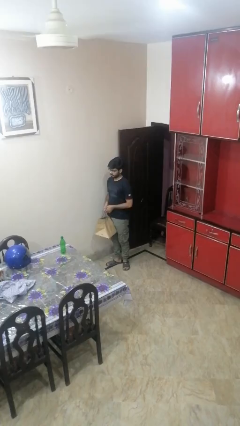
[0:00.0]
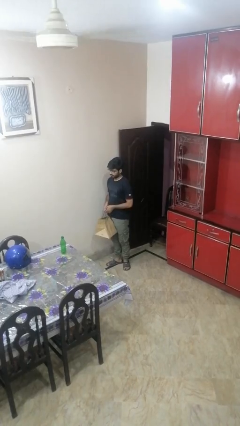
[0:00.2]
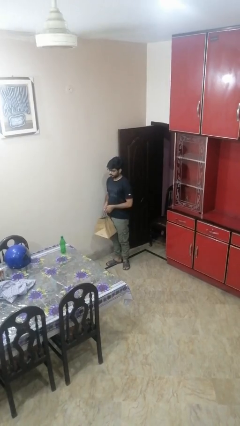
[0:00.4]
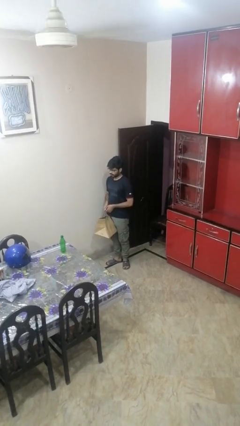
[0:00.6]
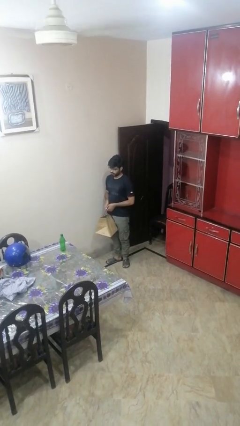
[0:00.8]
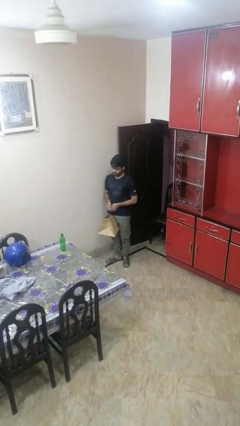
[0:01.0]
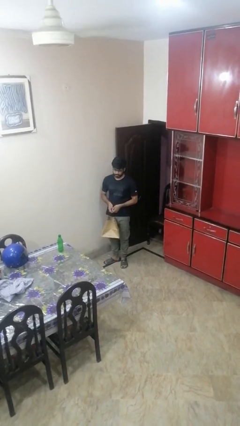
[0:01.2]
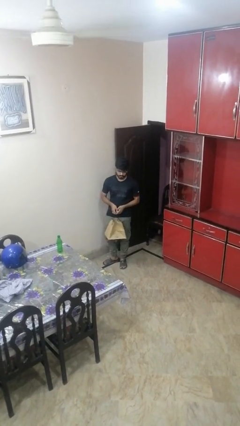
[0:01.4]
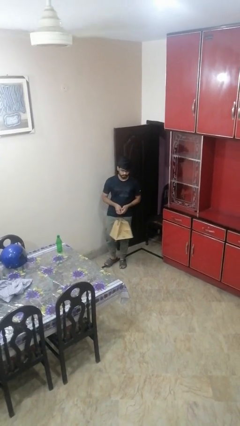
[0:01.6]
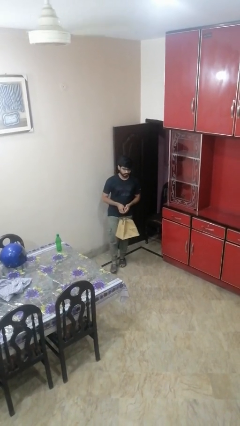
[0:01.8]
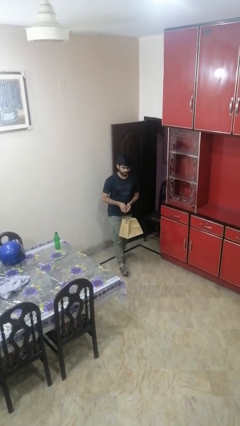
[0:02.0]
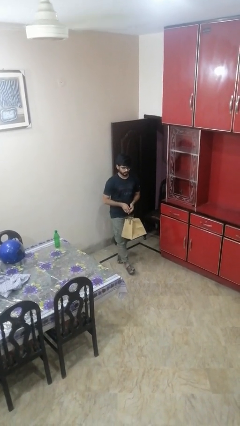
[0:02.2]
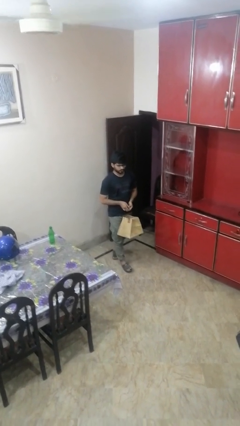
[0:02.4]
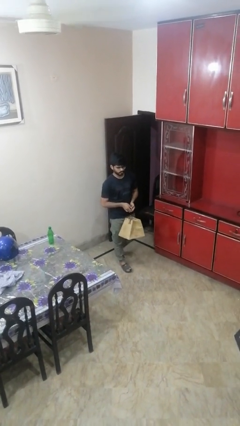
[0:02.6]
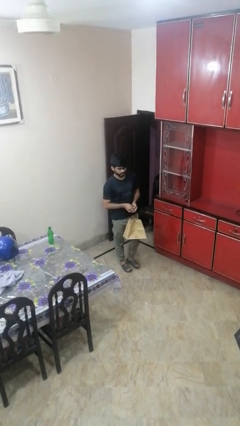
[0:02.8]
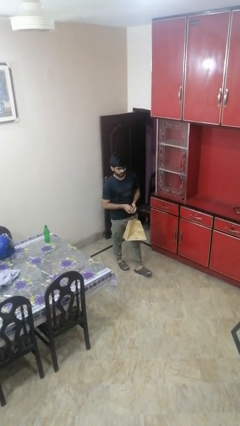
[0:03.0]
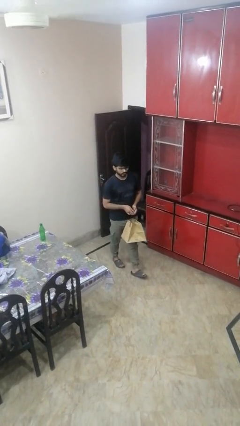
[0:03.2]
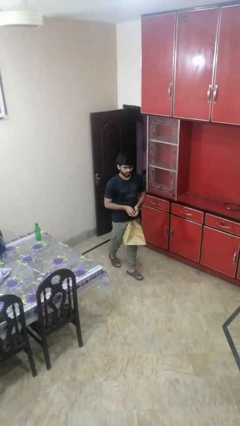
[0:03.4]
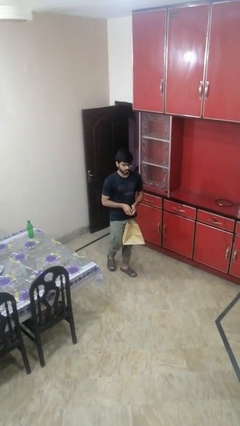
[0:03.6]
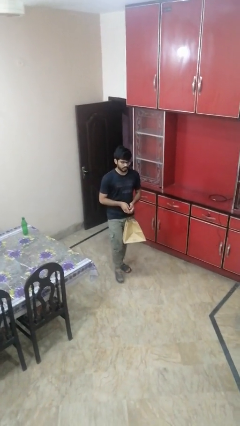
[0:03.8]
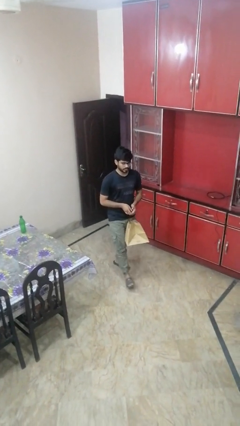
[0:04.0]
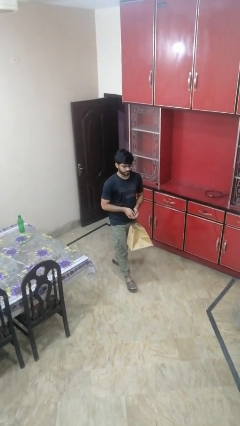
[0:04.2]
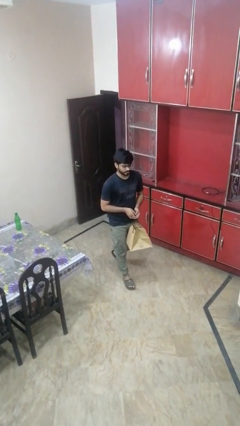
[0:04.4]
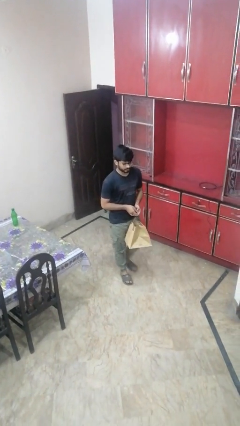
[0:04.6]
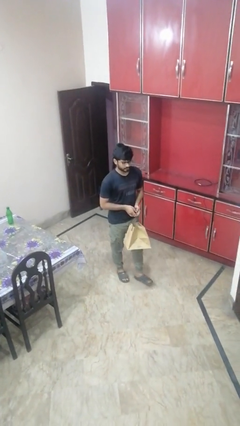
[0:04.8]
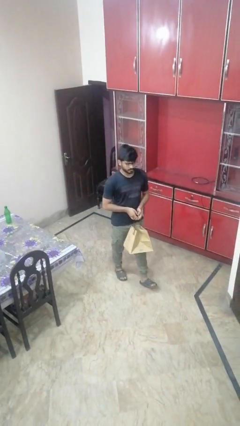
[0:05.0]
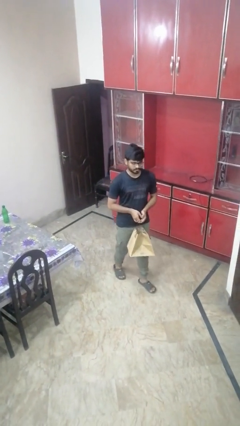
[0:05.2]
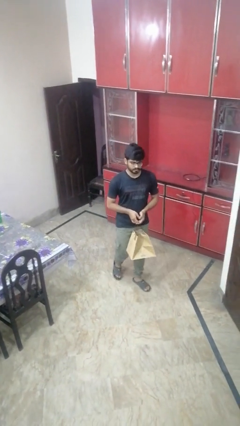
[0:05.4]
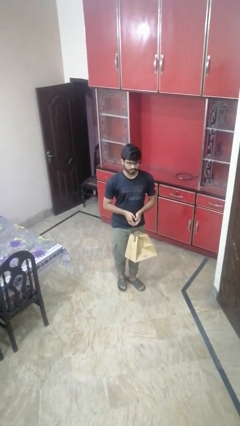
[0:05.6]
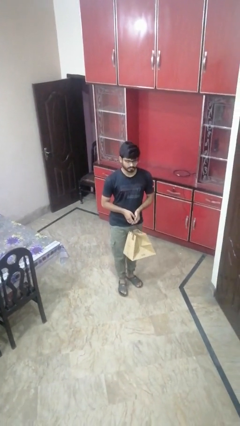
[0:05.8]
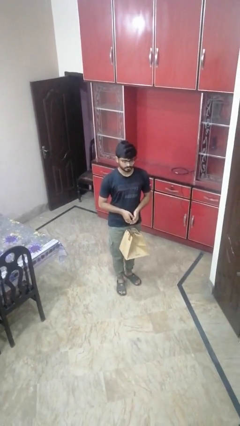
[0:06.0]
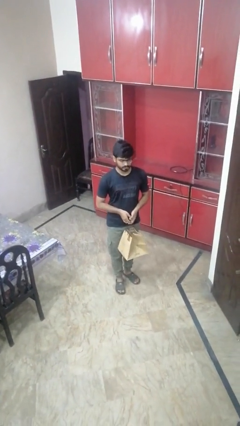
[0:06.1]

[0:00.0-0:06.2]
person carries groceries

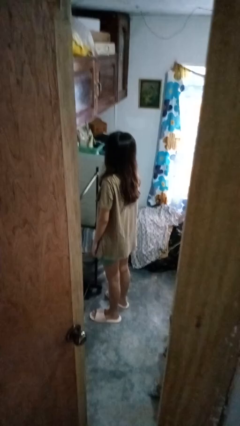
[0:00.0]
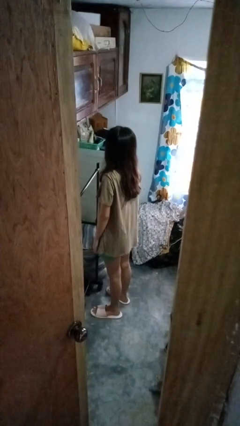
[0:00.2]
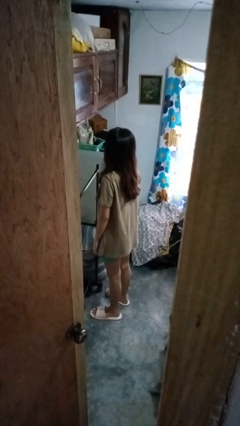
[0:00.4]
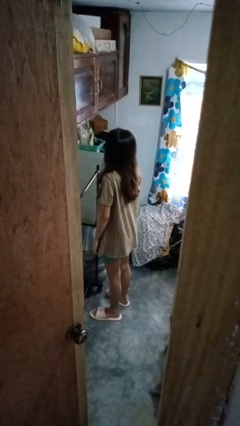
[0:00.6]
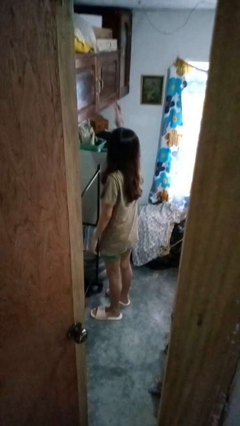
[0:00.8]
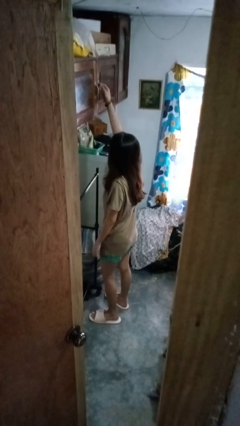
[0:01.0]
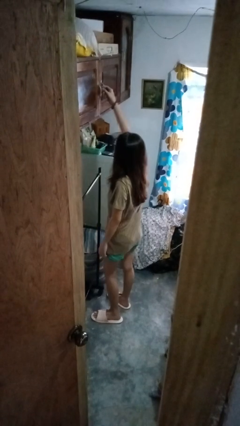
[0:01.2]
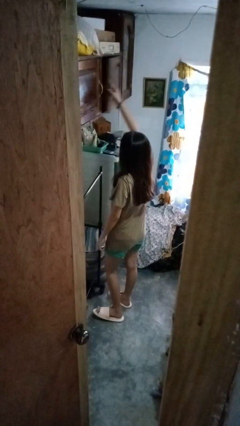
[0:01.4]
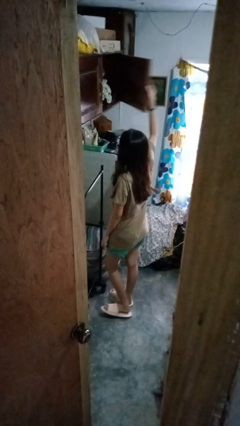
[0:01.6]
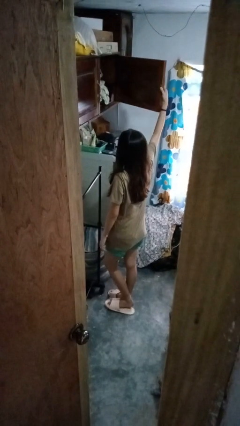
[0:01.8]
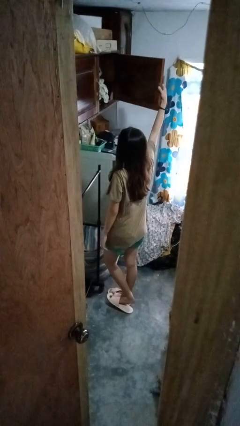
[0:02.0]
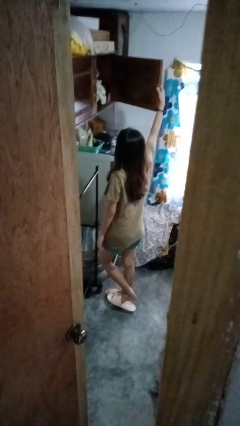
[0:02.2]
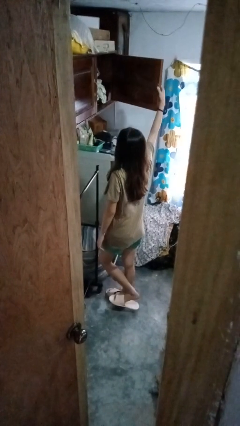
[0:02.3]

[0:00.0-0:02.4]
person opens closet door

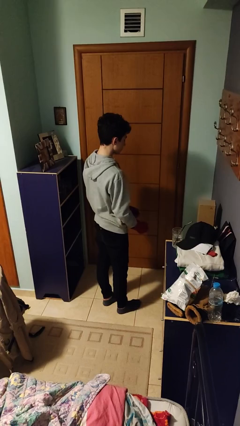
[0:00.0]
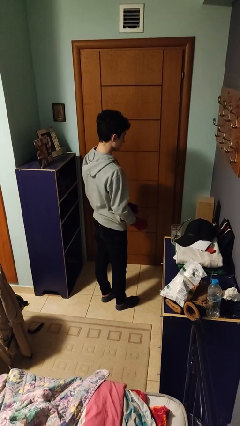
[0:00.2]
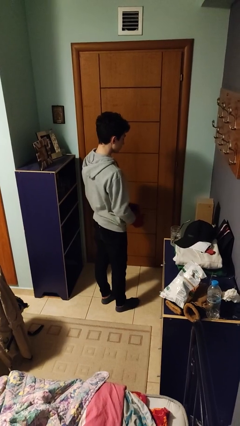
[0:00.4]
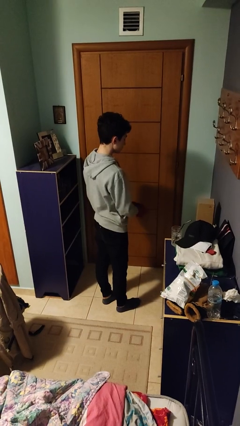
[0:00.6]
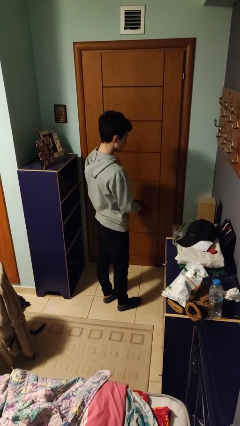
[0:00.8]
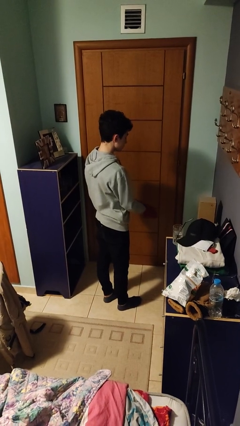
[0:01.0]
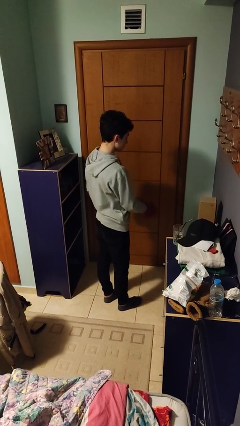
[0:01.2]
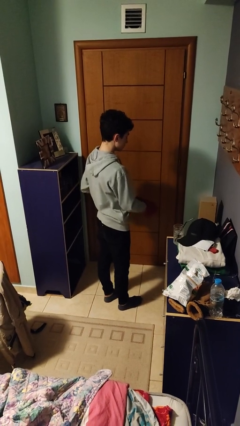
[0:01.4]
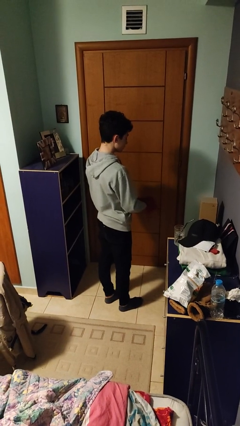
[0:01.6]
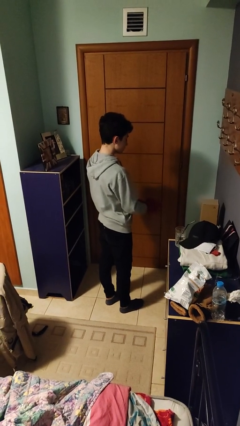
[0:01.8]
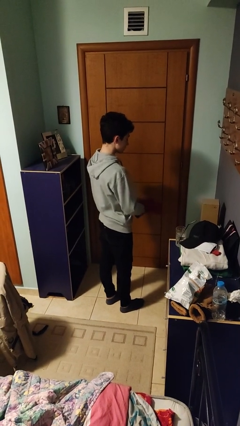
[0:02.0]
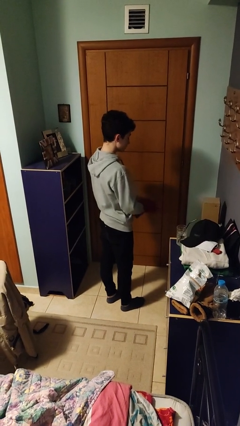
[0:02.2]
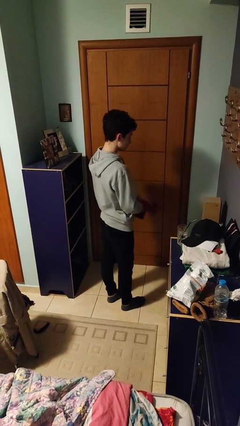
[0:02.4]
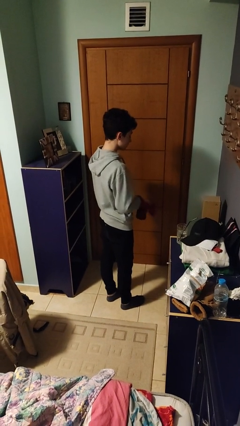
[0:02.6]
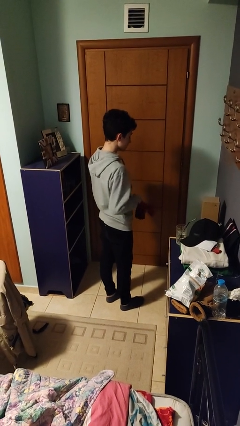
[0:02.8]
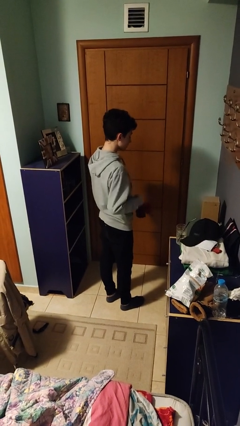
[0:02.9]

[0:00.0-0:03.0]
person takes off gloves

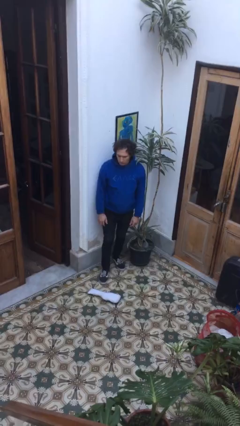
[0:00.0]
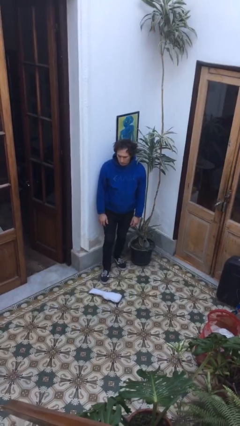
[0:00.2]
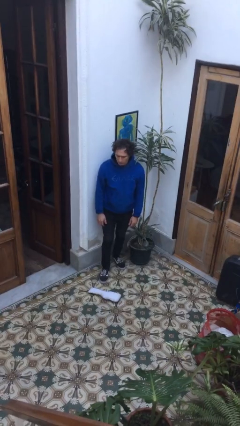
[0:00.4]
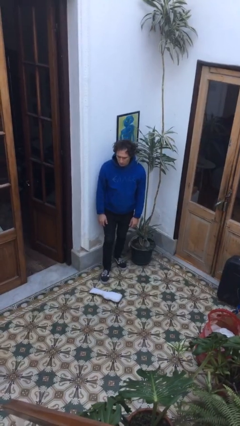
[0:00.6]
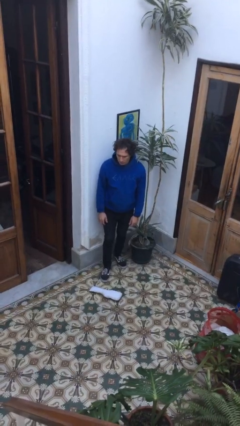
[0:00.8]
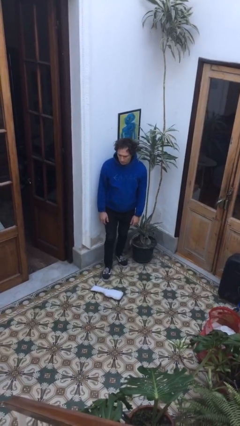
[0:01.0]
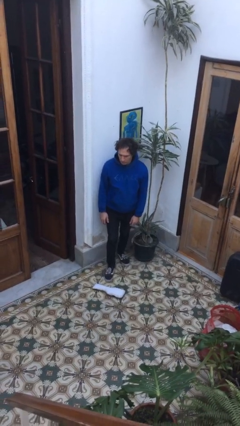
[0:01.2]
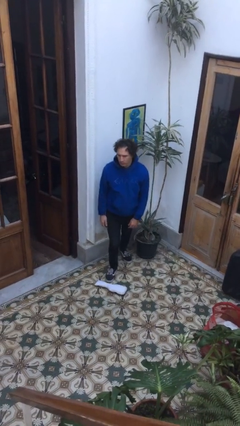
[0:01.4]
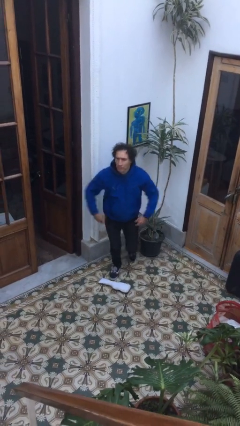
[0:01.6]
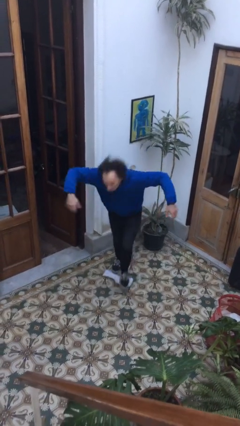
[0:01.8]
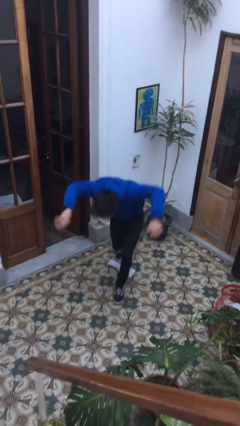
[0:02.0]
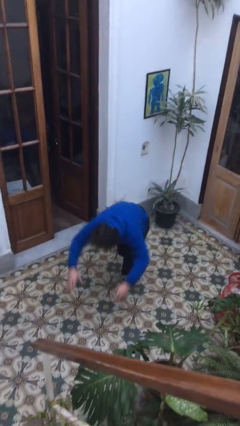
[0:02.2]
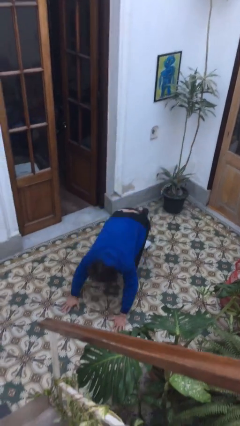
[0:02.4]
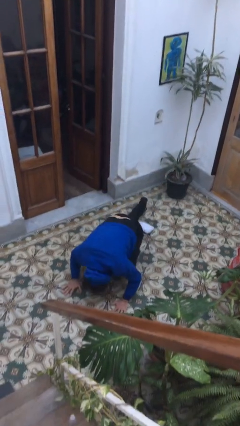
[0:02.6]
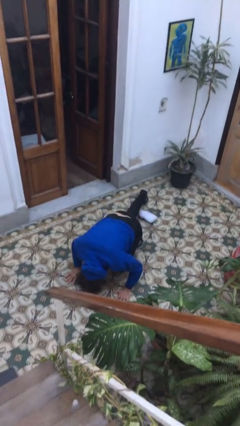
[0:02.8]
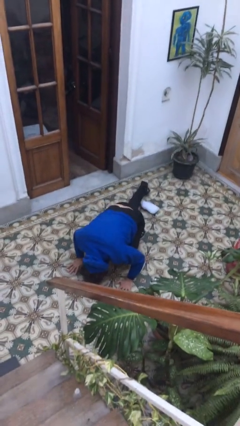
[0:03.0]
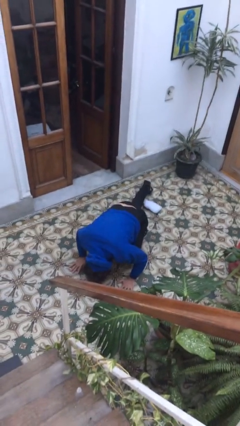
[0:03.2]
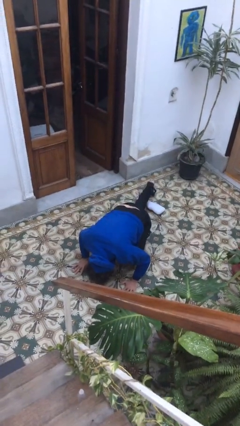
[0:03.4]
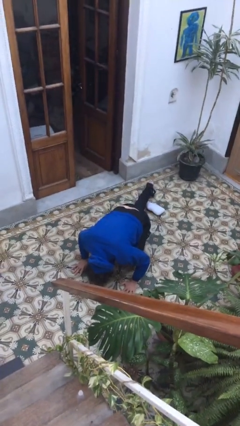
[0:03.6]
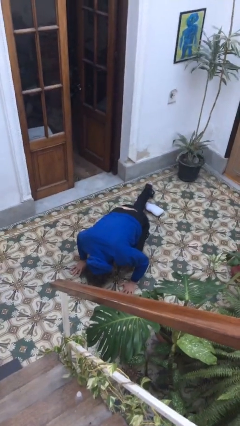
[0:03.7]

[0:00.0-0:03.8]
person trips on object on floor

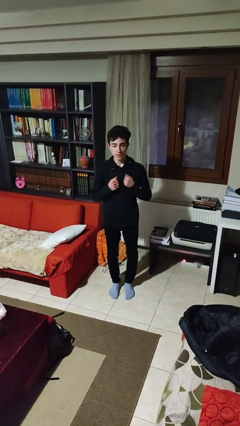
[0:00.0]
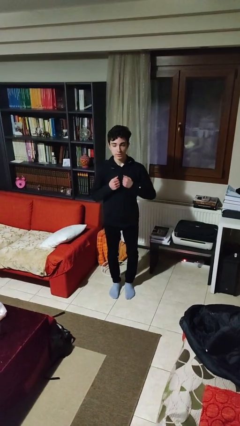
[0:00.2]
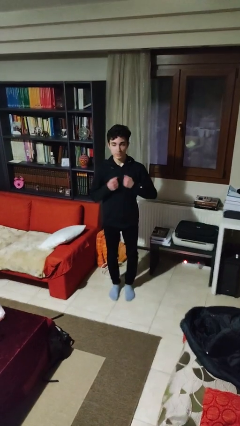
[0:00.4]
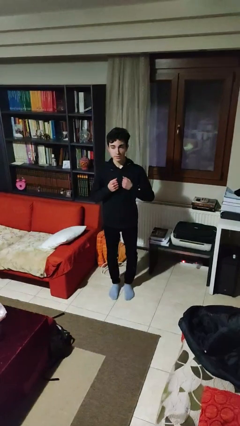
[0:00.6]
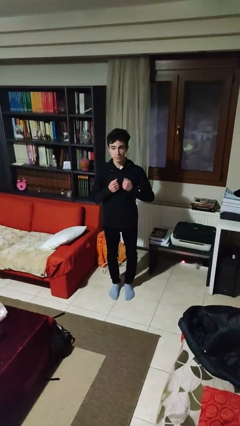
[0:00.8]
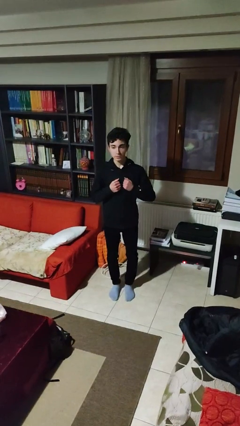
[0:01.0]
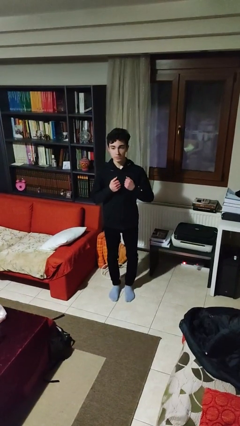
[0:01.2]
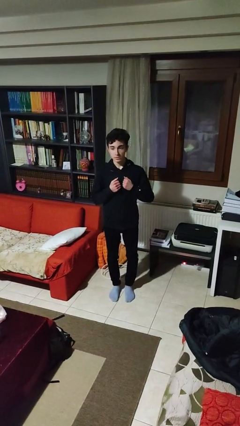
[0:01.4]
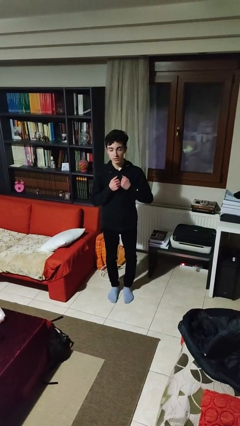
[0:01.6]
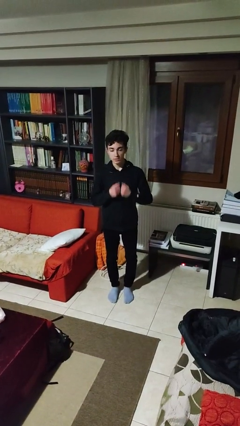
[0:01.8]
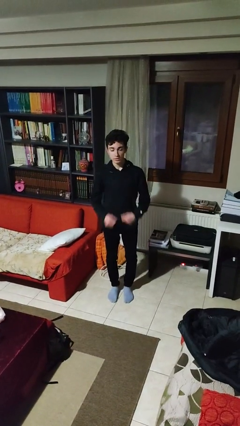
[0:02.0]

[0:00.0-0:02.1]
person drums on chest
